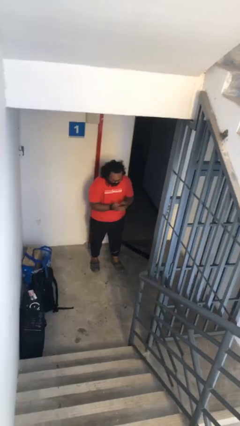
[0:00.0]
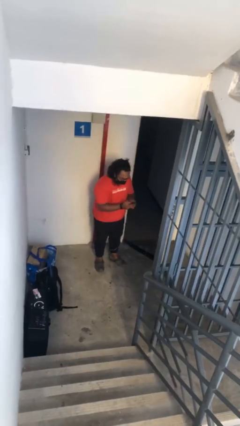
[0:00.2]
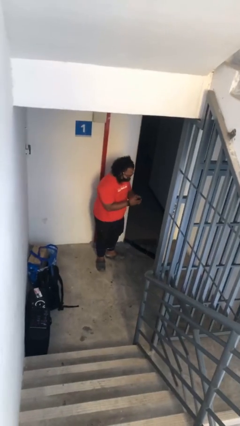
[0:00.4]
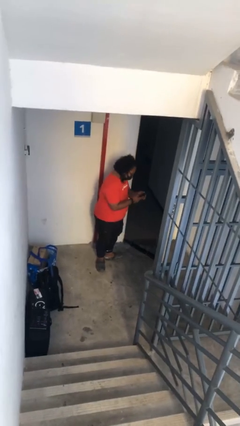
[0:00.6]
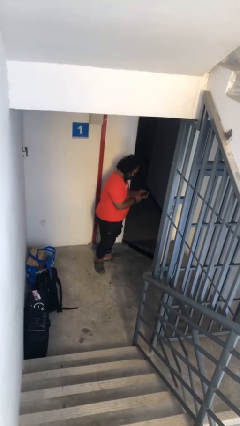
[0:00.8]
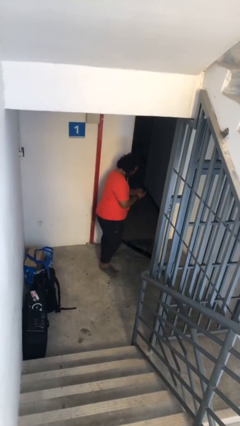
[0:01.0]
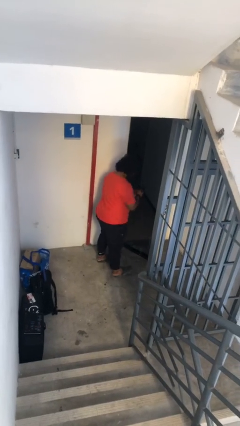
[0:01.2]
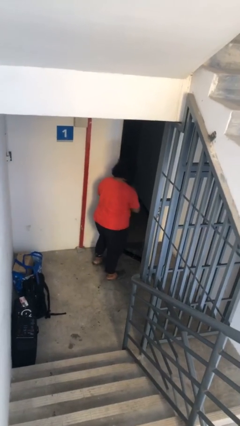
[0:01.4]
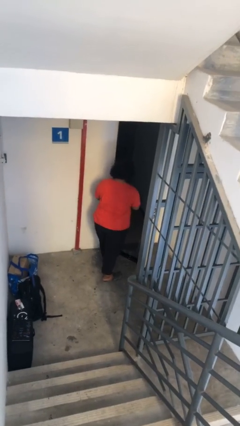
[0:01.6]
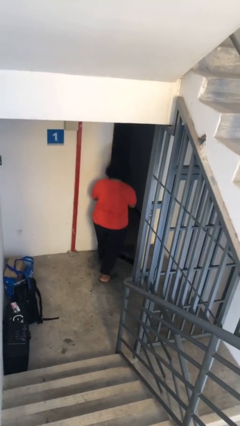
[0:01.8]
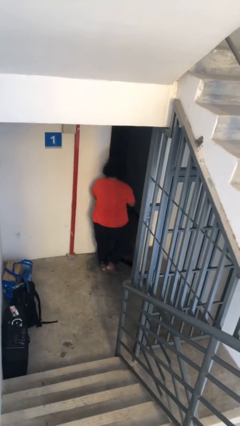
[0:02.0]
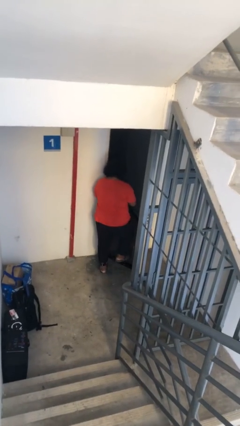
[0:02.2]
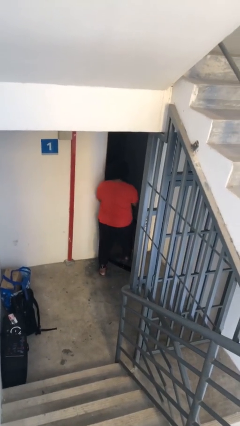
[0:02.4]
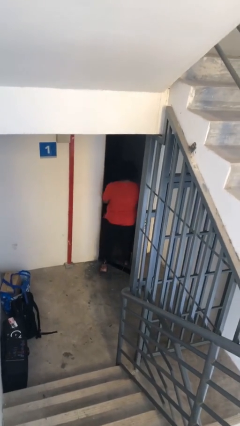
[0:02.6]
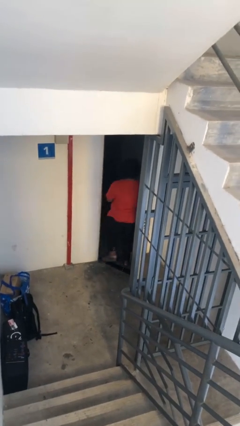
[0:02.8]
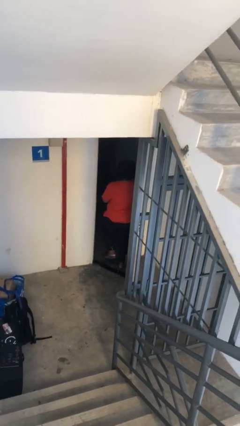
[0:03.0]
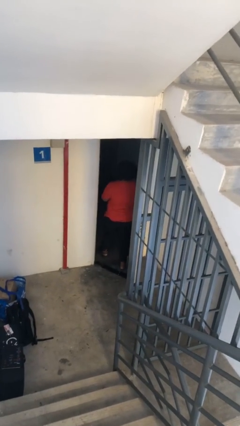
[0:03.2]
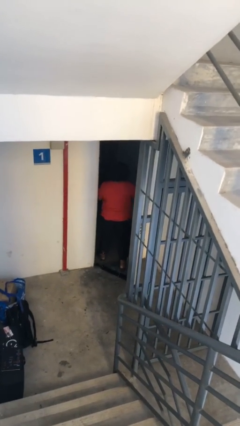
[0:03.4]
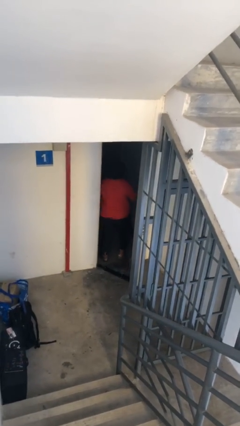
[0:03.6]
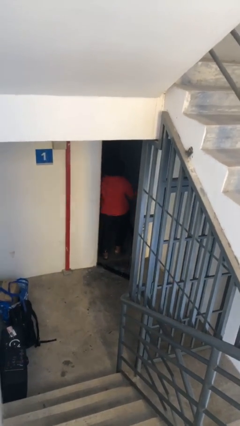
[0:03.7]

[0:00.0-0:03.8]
person exits scene through structure

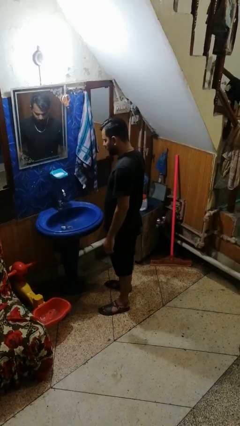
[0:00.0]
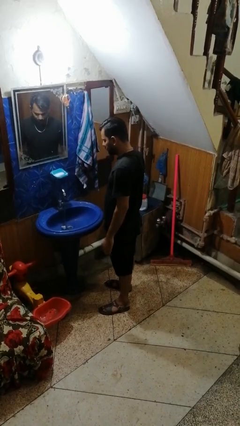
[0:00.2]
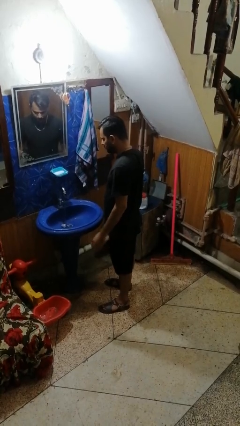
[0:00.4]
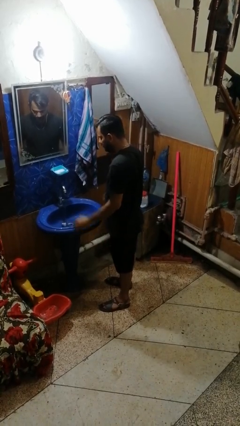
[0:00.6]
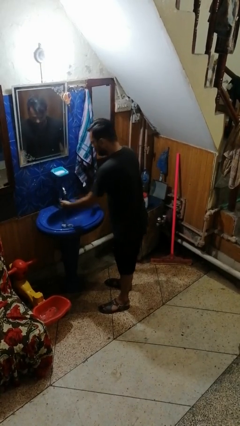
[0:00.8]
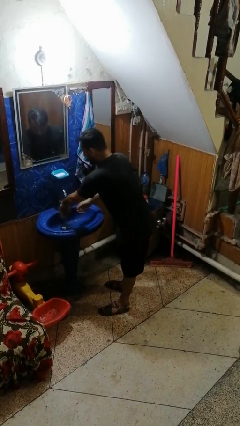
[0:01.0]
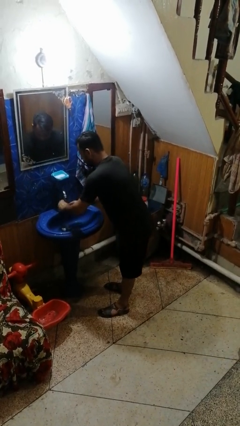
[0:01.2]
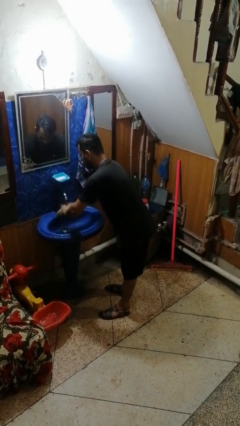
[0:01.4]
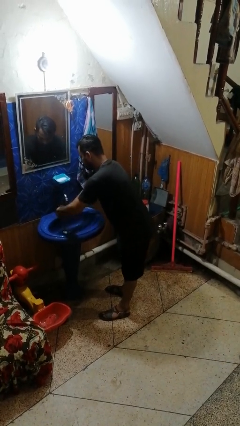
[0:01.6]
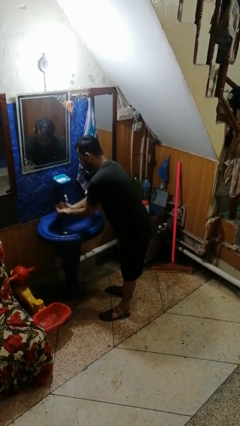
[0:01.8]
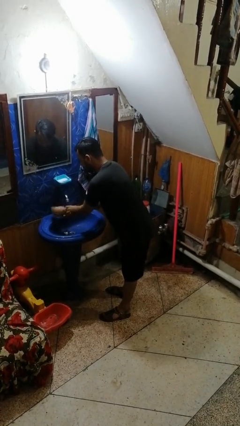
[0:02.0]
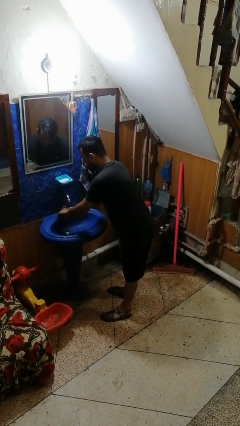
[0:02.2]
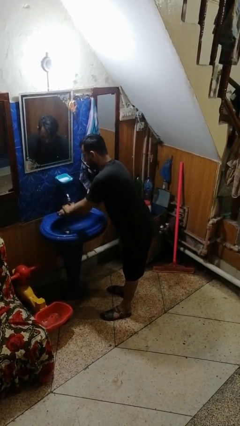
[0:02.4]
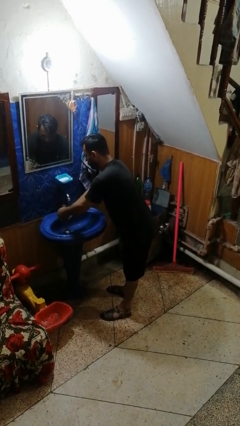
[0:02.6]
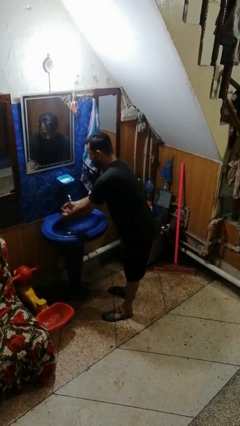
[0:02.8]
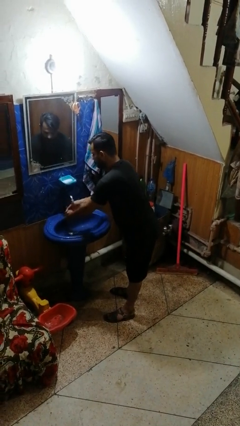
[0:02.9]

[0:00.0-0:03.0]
person washes hands

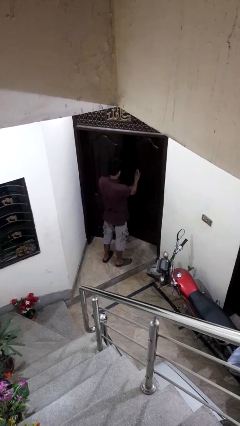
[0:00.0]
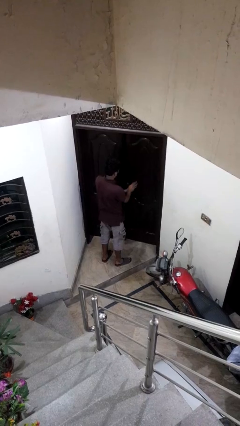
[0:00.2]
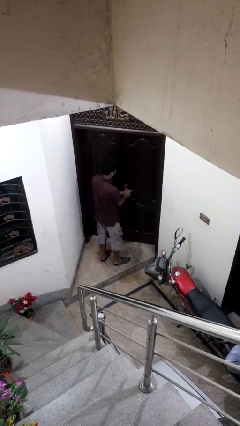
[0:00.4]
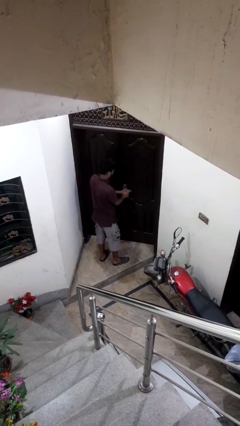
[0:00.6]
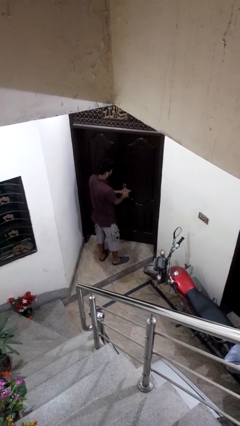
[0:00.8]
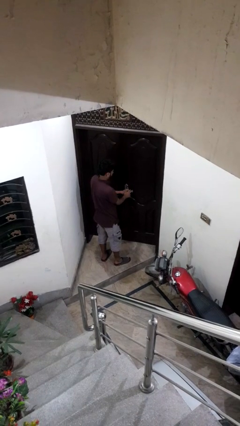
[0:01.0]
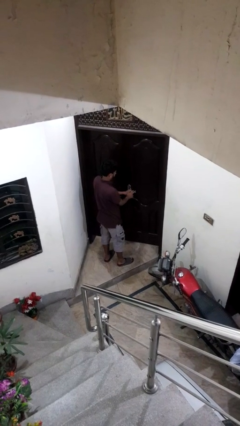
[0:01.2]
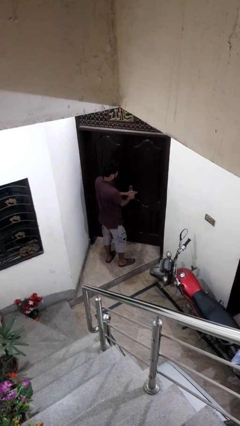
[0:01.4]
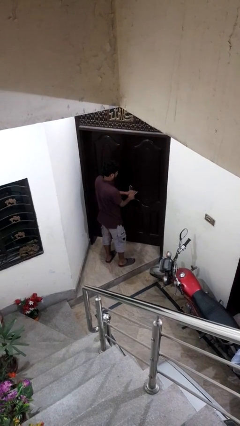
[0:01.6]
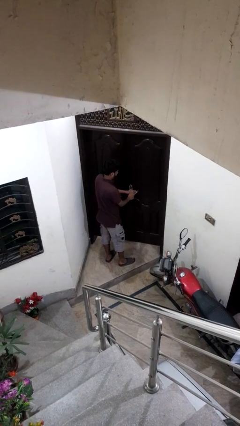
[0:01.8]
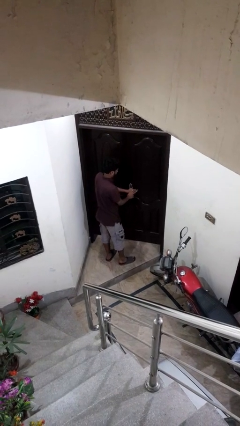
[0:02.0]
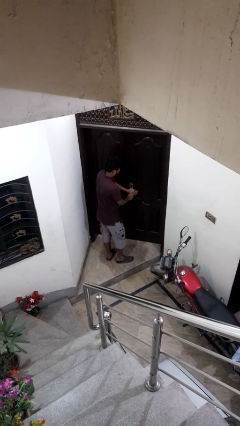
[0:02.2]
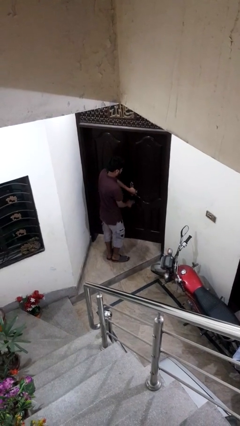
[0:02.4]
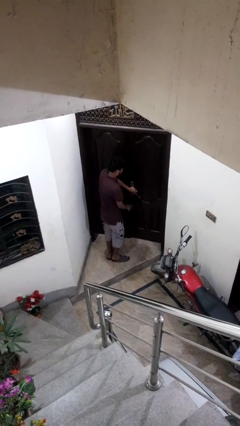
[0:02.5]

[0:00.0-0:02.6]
person closes facility door

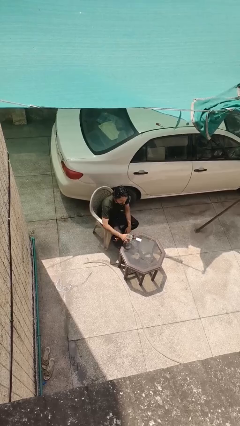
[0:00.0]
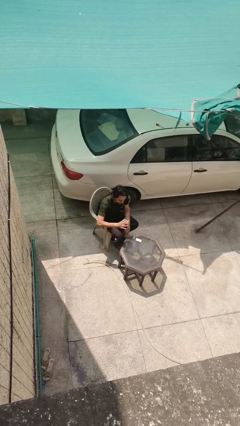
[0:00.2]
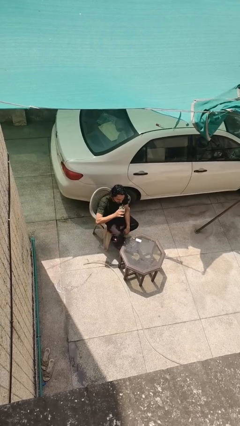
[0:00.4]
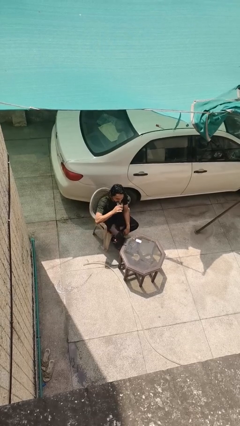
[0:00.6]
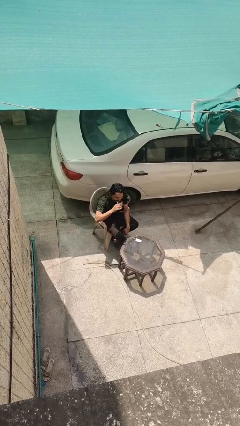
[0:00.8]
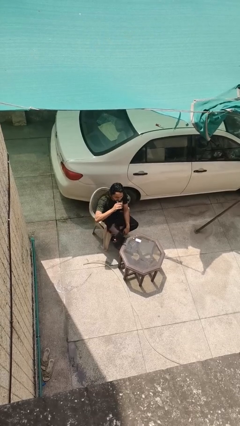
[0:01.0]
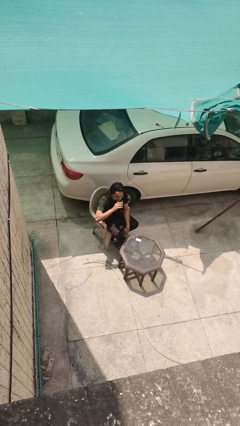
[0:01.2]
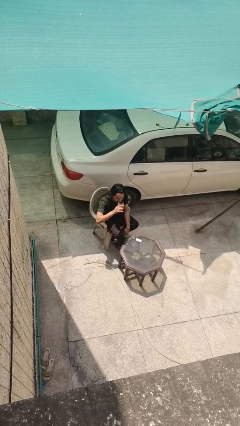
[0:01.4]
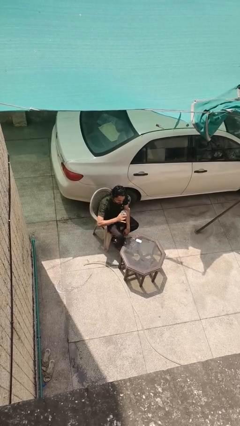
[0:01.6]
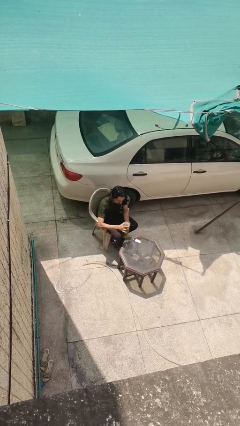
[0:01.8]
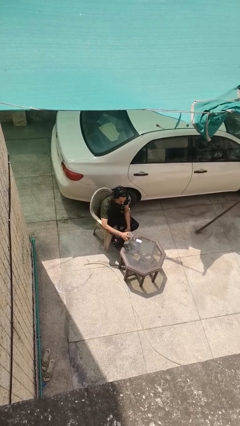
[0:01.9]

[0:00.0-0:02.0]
person drinks from cup

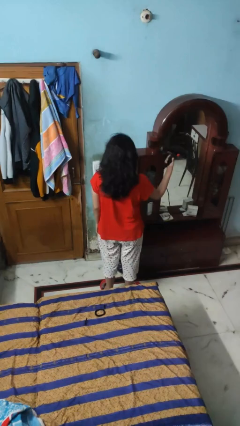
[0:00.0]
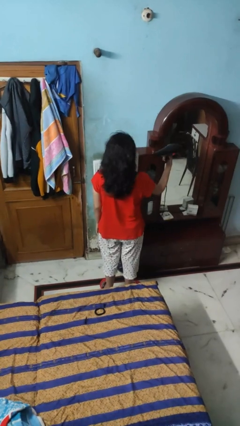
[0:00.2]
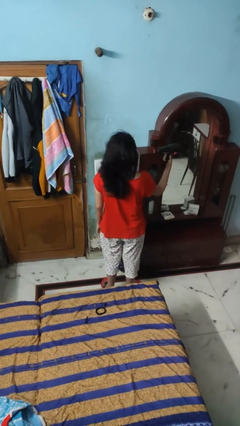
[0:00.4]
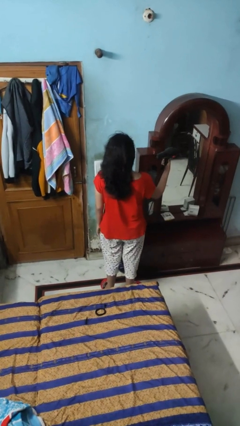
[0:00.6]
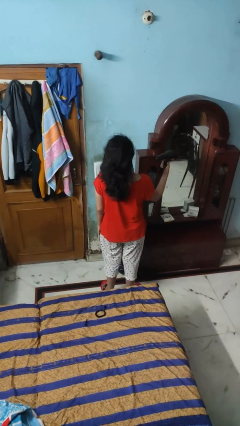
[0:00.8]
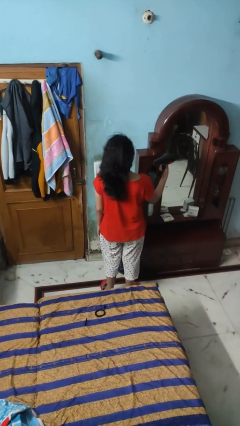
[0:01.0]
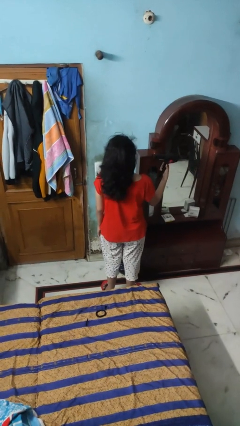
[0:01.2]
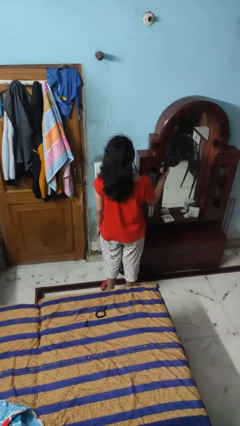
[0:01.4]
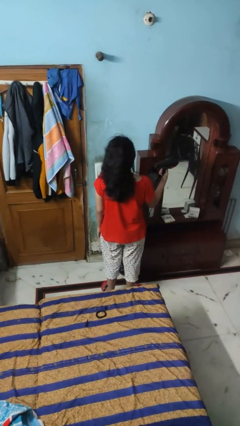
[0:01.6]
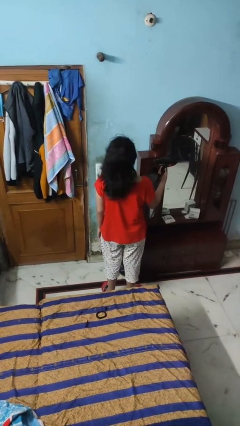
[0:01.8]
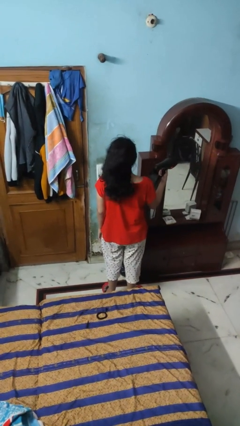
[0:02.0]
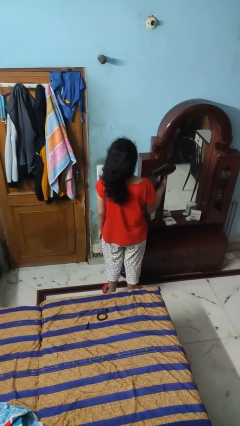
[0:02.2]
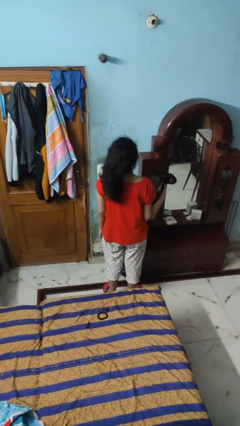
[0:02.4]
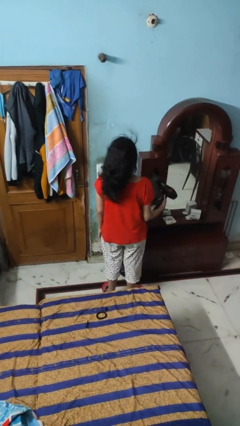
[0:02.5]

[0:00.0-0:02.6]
person dries hair with hairdryer

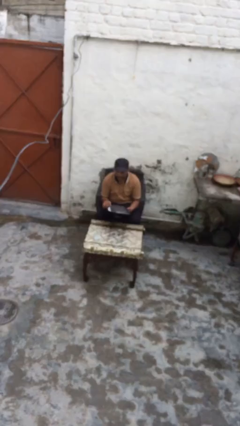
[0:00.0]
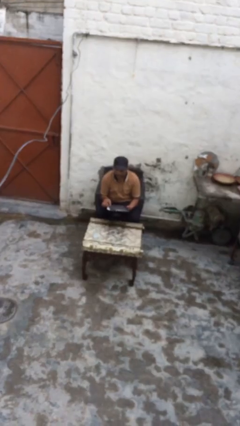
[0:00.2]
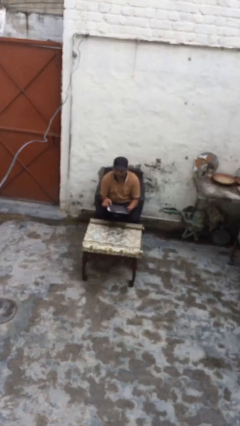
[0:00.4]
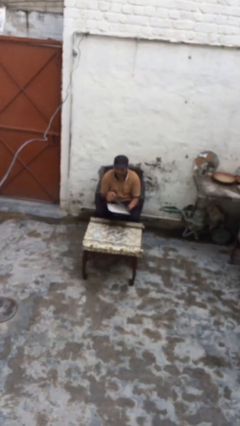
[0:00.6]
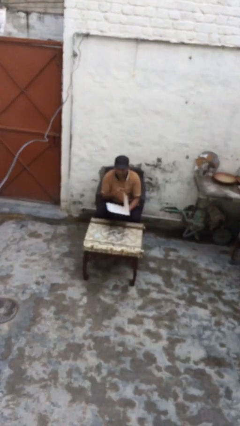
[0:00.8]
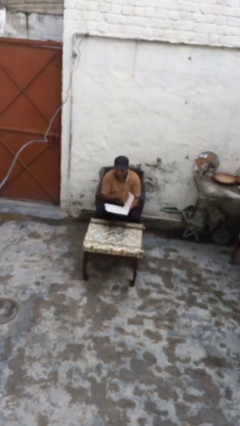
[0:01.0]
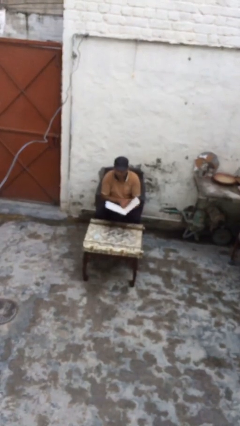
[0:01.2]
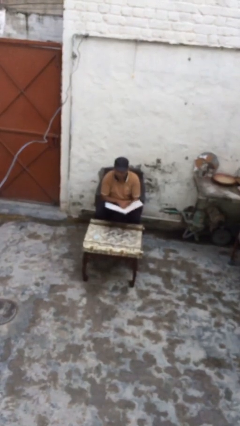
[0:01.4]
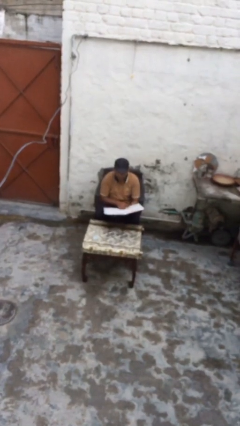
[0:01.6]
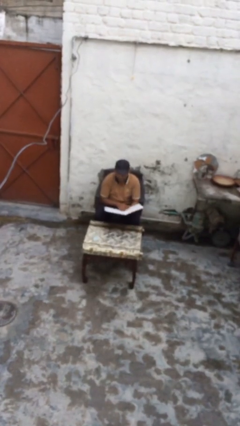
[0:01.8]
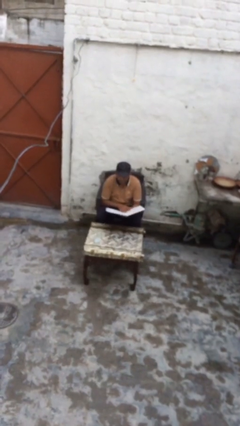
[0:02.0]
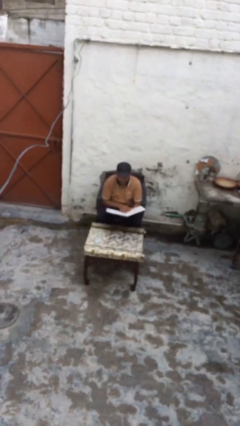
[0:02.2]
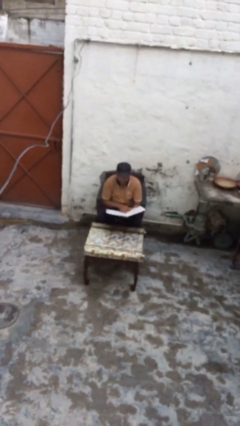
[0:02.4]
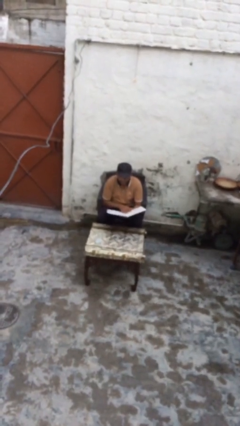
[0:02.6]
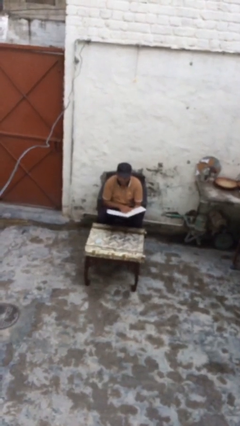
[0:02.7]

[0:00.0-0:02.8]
person reads document

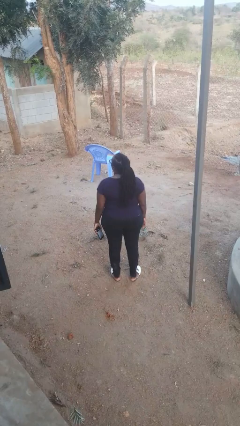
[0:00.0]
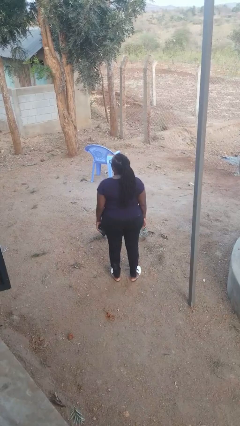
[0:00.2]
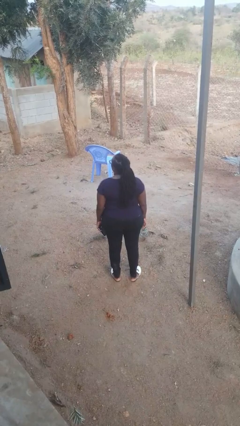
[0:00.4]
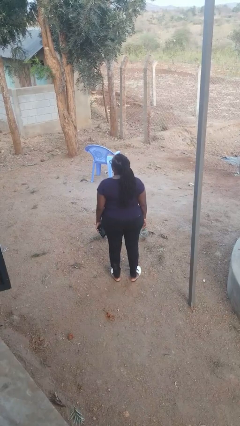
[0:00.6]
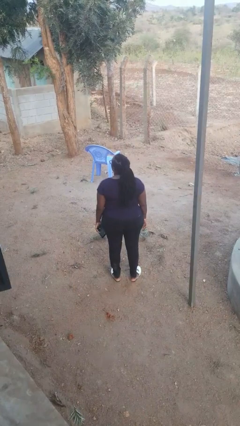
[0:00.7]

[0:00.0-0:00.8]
person takes selfie
